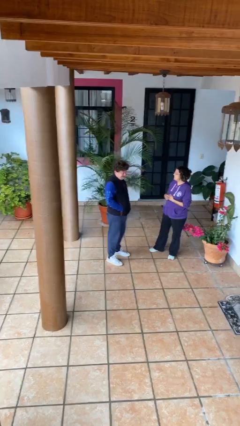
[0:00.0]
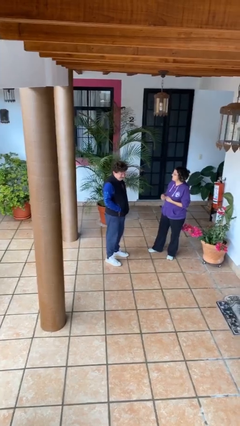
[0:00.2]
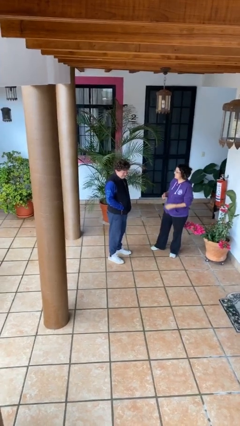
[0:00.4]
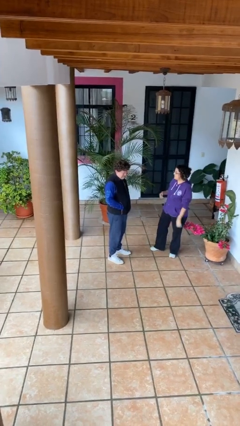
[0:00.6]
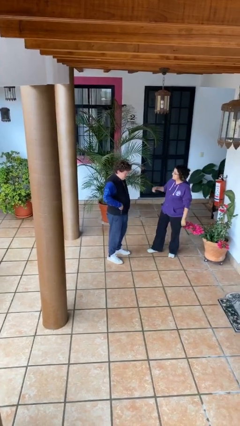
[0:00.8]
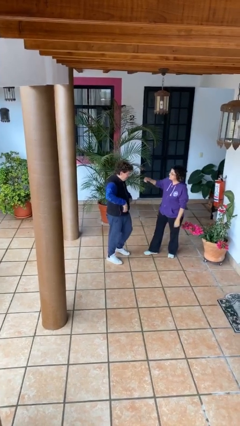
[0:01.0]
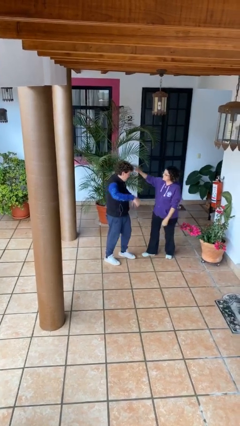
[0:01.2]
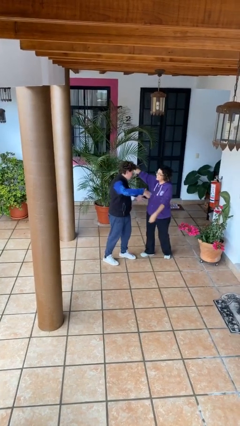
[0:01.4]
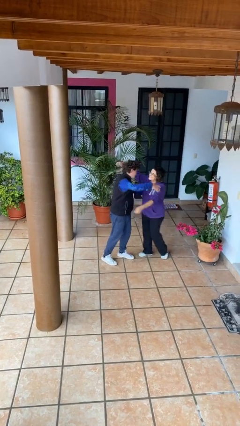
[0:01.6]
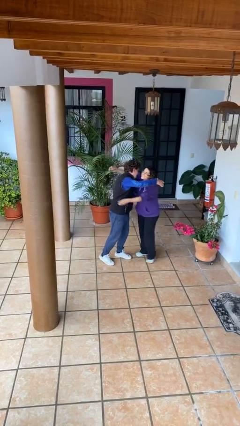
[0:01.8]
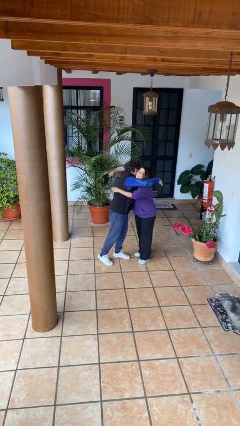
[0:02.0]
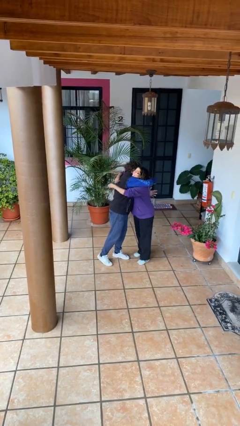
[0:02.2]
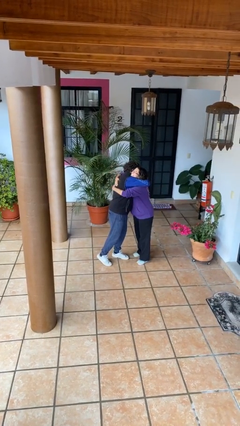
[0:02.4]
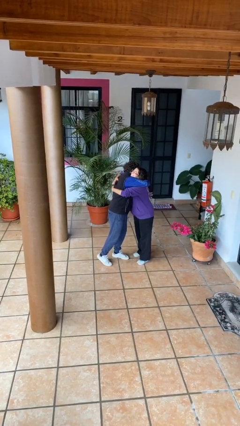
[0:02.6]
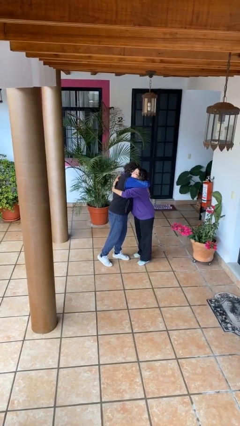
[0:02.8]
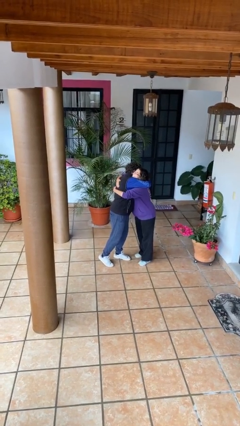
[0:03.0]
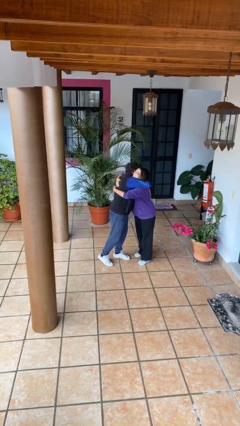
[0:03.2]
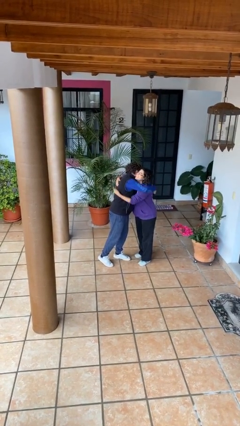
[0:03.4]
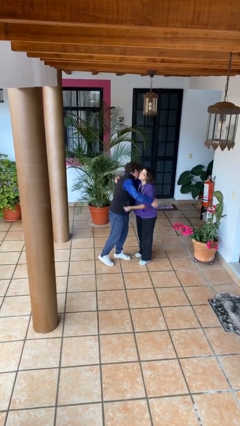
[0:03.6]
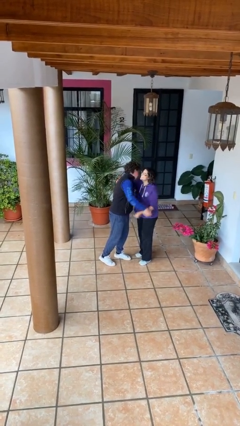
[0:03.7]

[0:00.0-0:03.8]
person embraces person

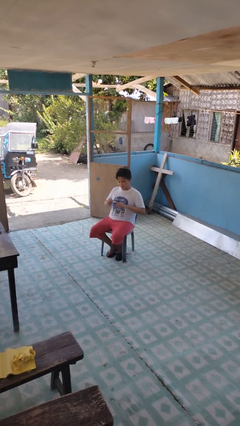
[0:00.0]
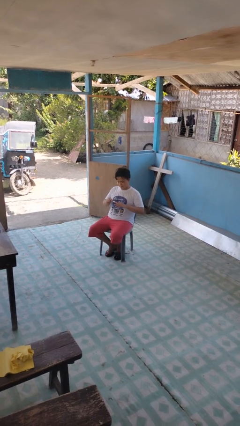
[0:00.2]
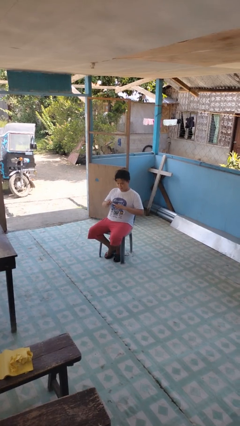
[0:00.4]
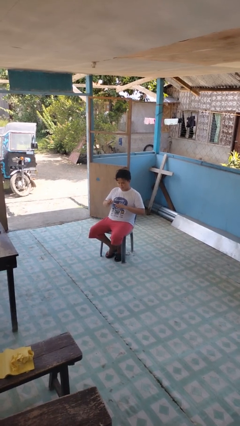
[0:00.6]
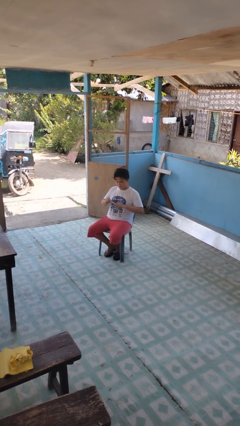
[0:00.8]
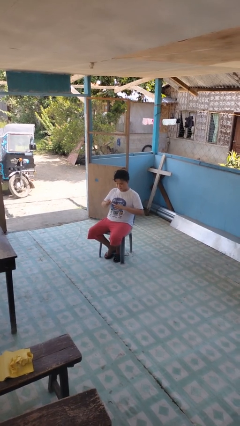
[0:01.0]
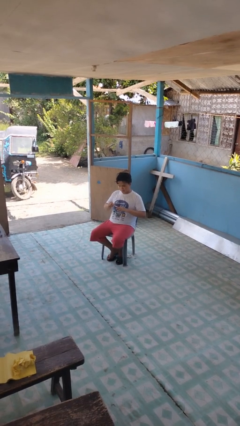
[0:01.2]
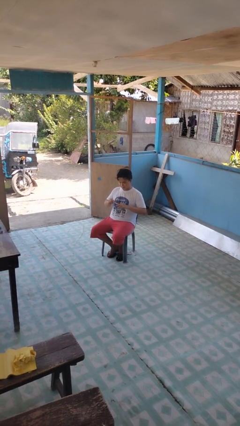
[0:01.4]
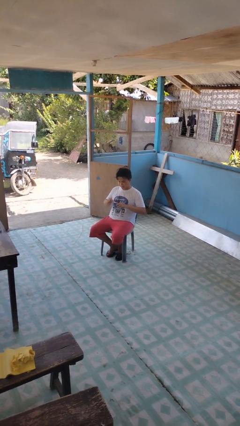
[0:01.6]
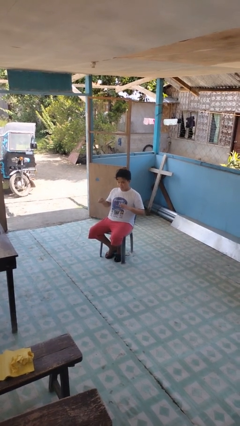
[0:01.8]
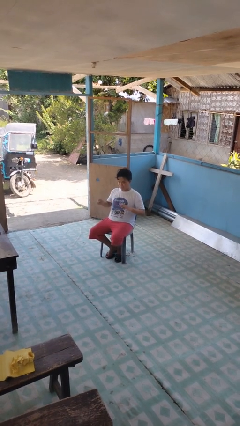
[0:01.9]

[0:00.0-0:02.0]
person files fingernails

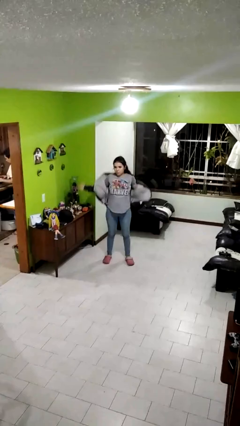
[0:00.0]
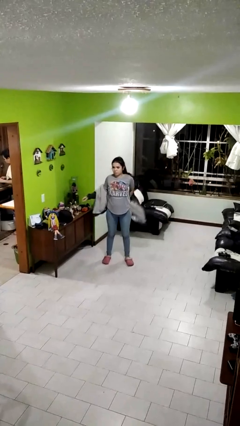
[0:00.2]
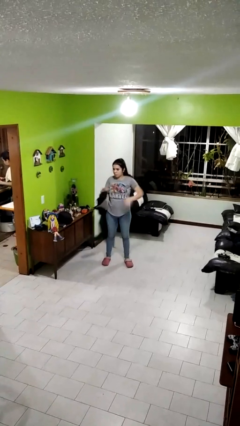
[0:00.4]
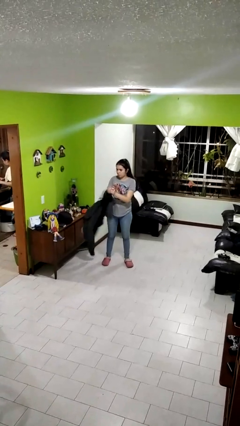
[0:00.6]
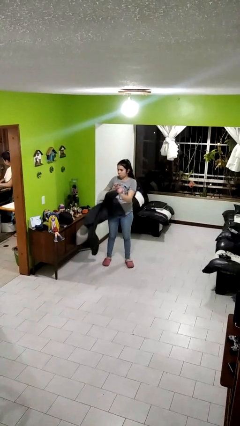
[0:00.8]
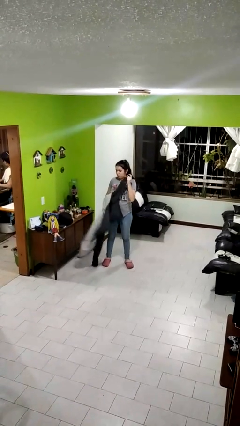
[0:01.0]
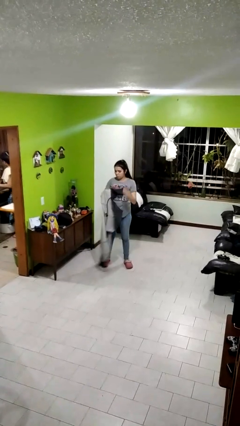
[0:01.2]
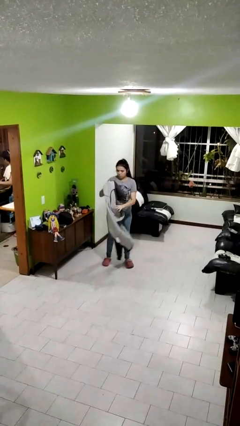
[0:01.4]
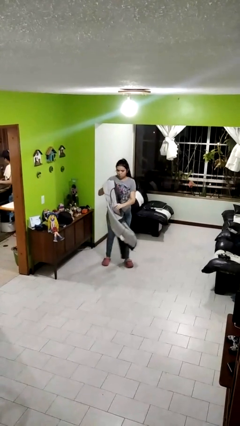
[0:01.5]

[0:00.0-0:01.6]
person takes off jacket

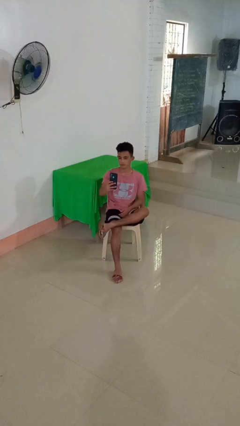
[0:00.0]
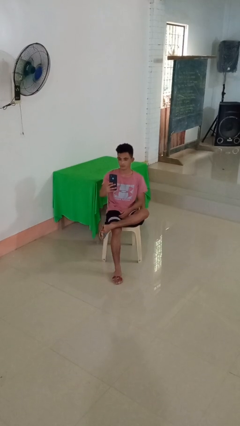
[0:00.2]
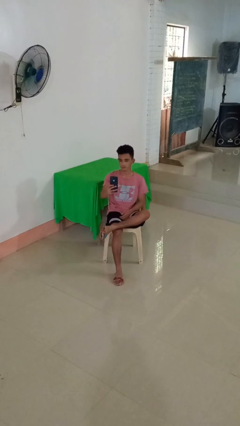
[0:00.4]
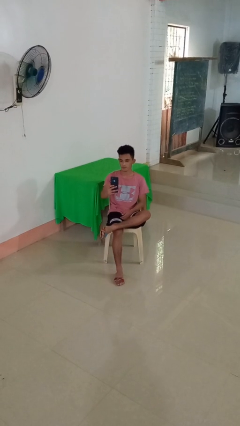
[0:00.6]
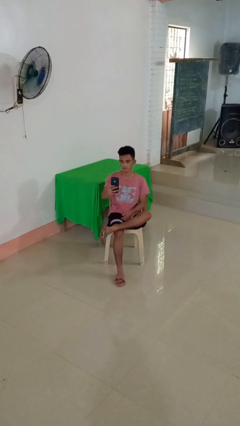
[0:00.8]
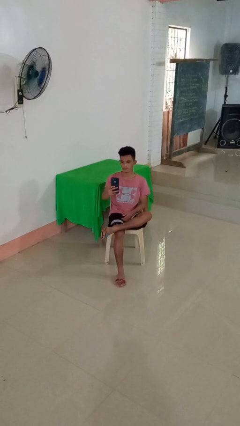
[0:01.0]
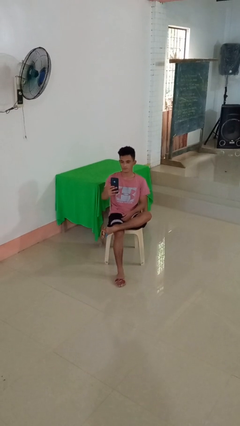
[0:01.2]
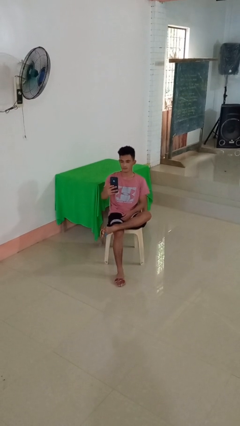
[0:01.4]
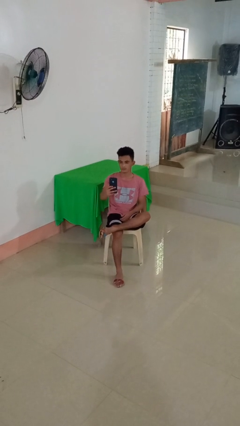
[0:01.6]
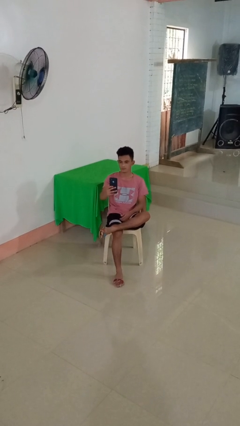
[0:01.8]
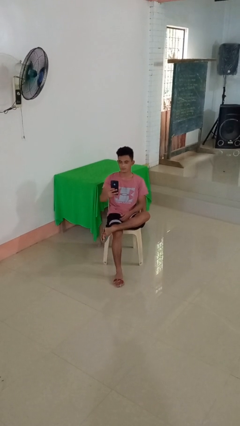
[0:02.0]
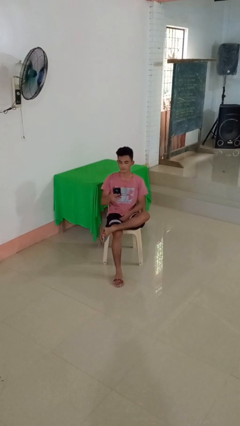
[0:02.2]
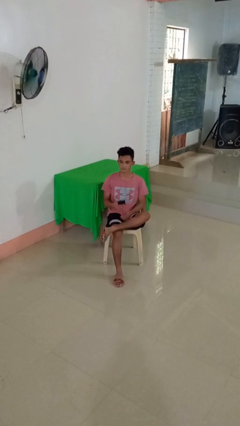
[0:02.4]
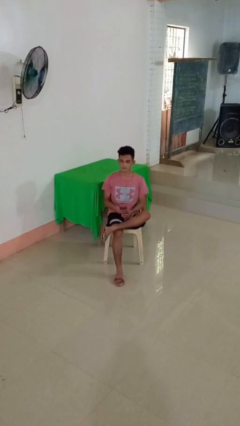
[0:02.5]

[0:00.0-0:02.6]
person takes selfie

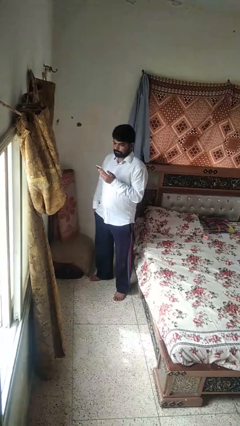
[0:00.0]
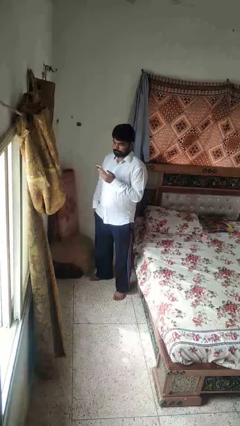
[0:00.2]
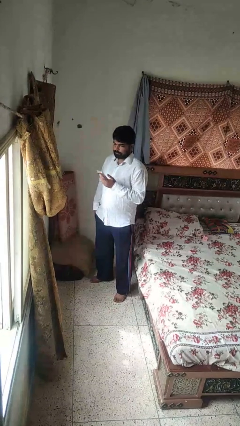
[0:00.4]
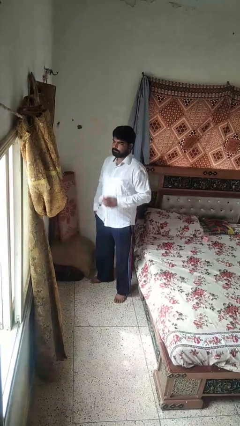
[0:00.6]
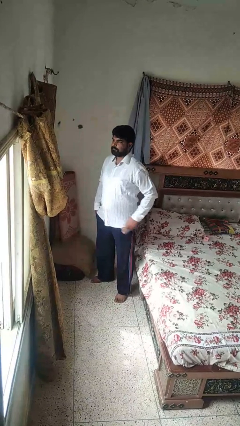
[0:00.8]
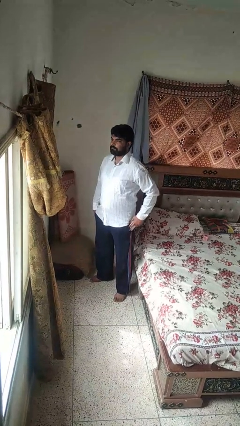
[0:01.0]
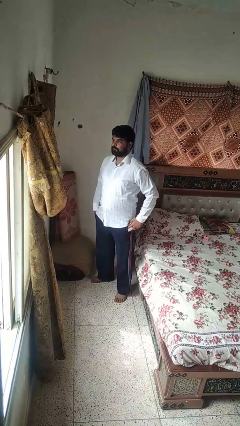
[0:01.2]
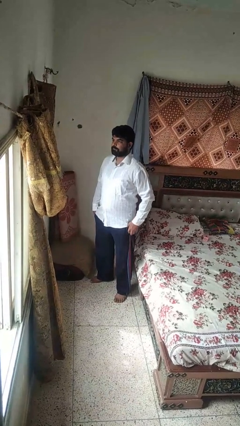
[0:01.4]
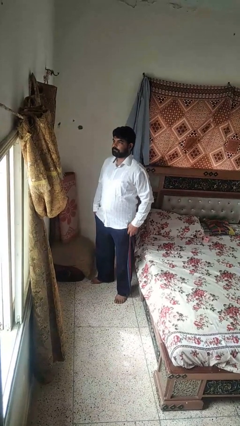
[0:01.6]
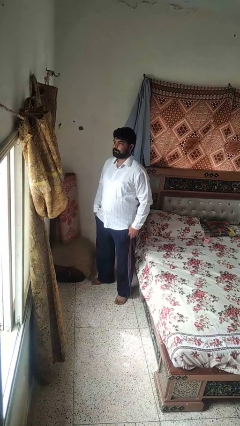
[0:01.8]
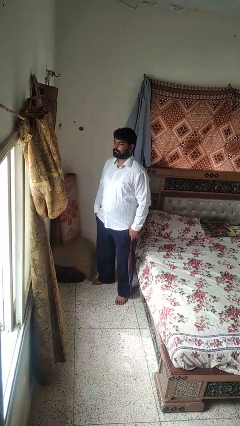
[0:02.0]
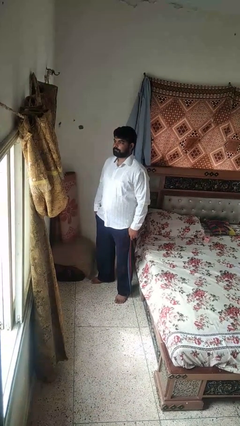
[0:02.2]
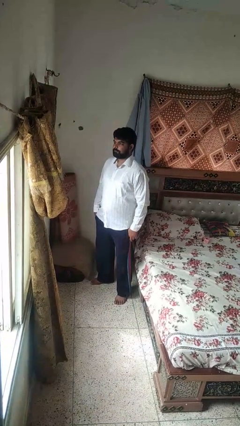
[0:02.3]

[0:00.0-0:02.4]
person puts phone into pocket

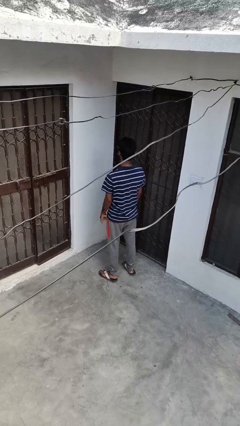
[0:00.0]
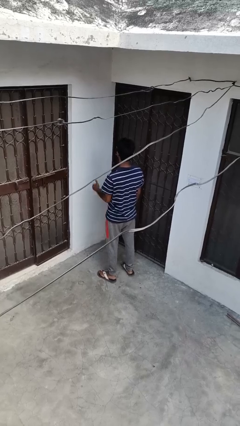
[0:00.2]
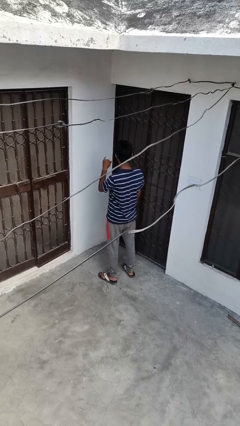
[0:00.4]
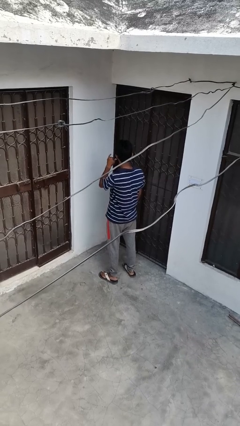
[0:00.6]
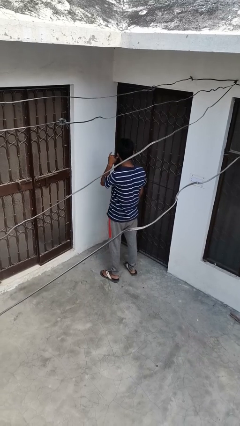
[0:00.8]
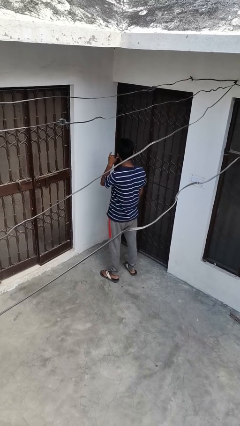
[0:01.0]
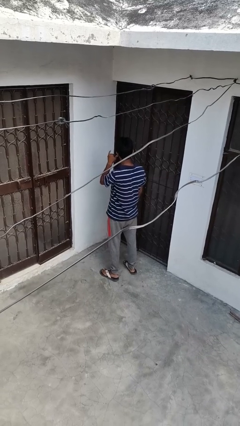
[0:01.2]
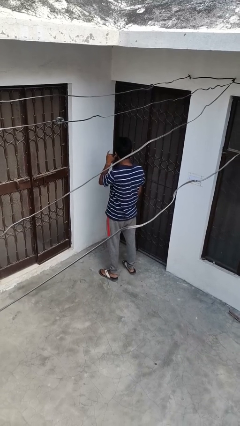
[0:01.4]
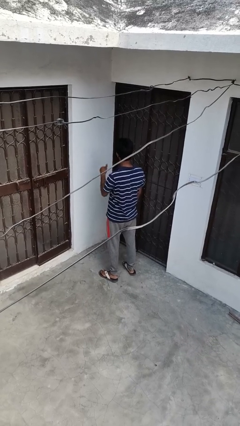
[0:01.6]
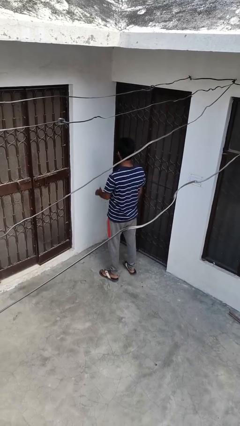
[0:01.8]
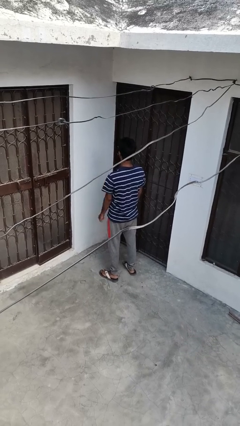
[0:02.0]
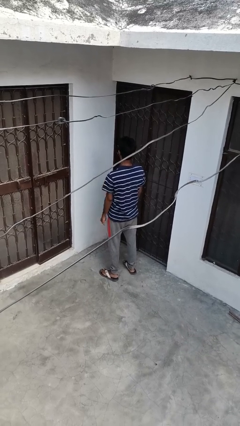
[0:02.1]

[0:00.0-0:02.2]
person gestures call me

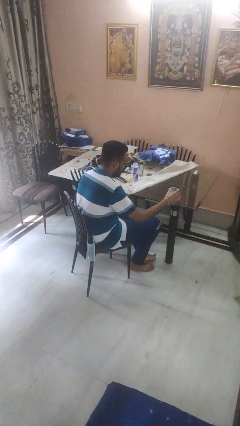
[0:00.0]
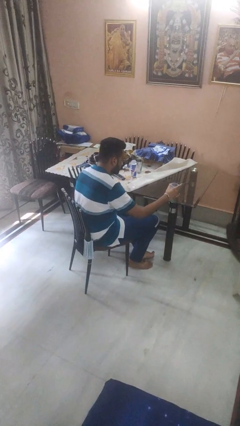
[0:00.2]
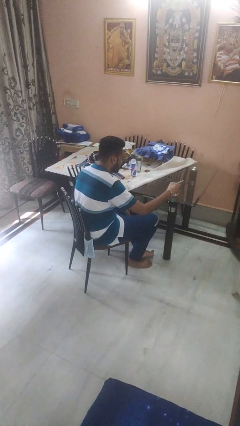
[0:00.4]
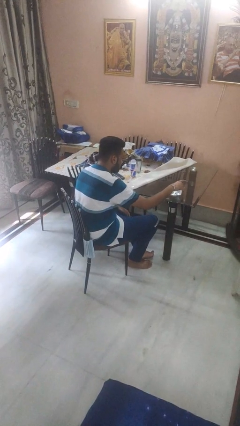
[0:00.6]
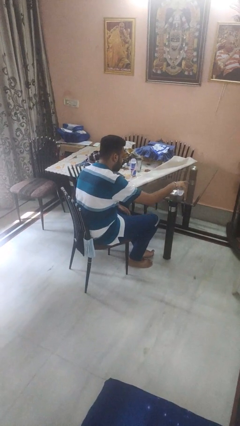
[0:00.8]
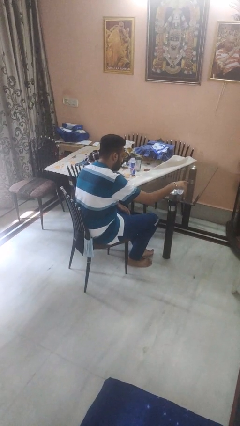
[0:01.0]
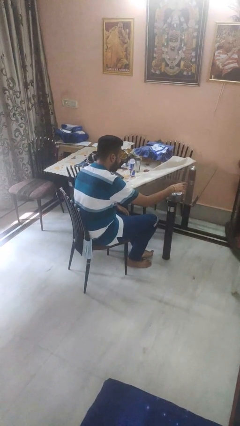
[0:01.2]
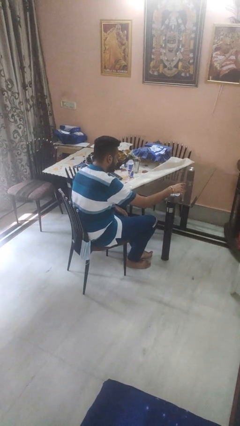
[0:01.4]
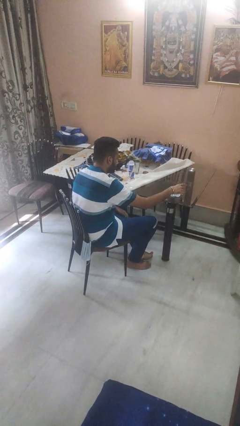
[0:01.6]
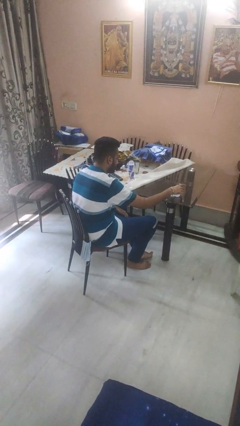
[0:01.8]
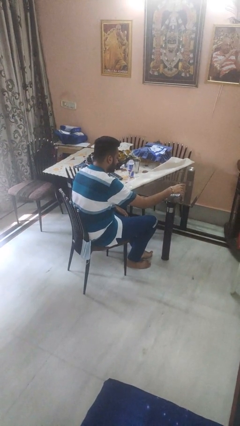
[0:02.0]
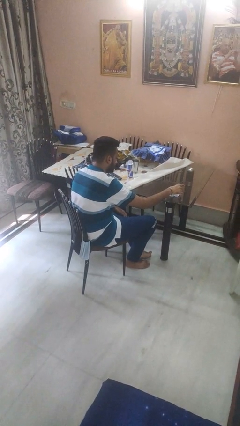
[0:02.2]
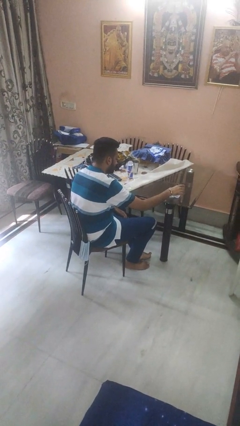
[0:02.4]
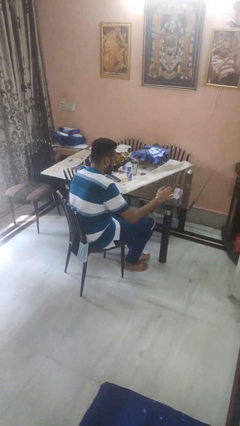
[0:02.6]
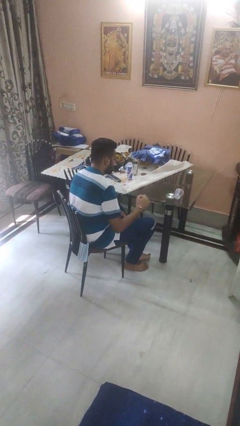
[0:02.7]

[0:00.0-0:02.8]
person spills on floor
